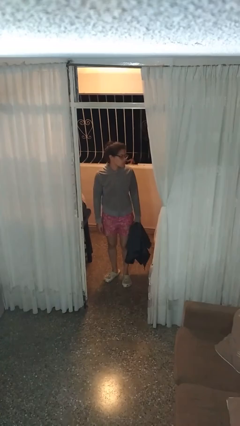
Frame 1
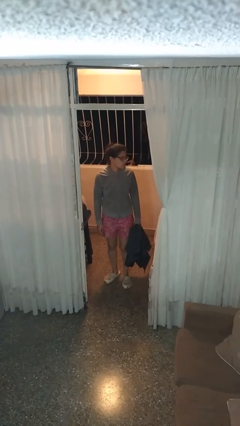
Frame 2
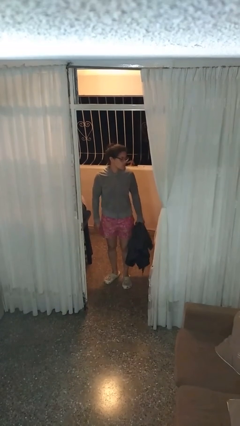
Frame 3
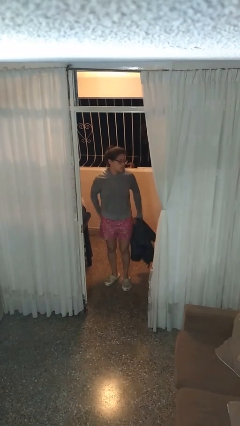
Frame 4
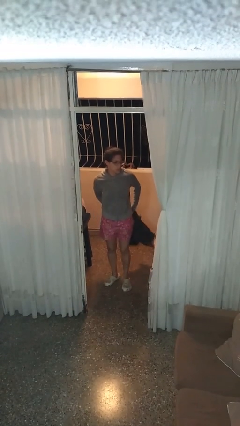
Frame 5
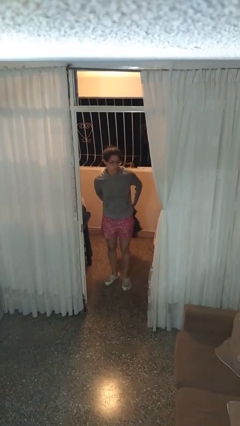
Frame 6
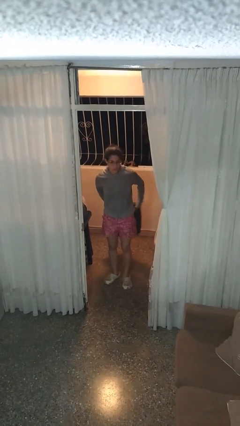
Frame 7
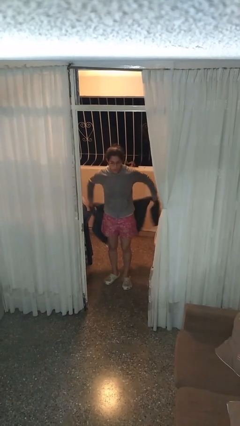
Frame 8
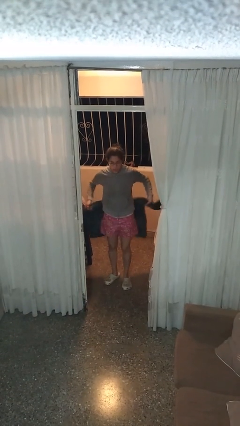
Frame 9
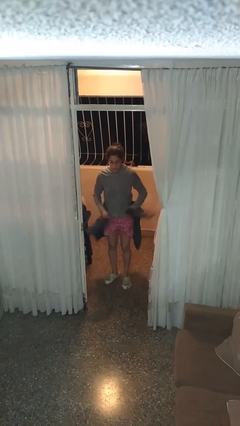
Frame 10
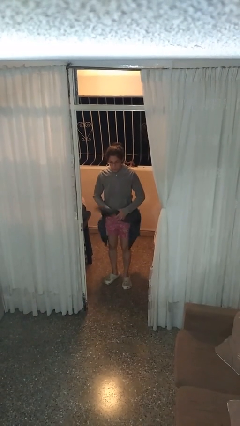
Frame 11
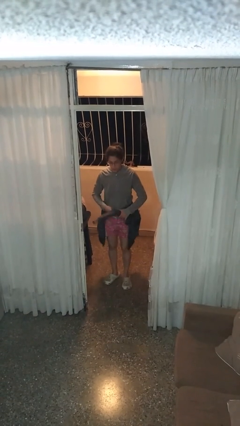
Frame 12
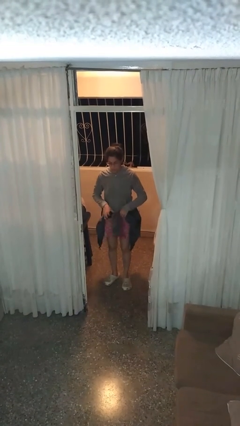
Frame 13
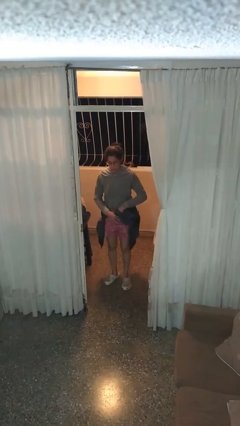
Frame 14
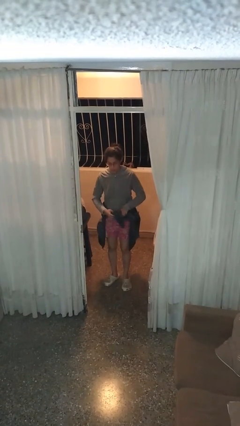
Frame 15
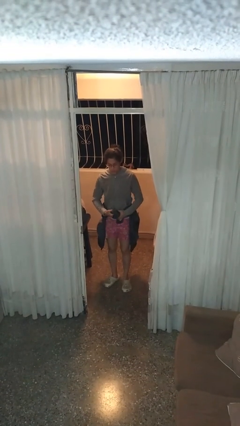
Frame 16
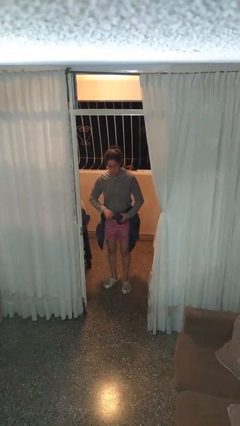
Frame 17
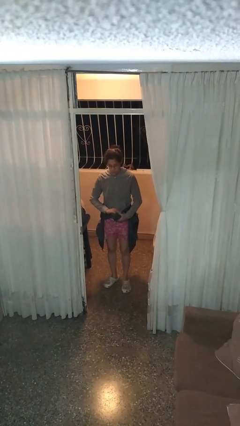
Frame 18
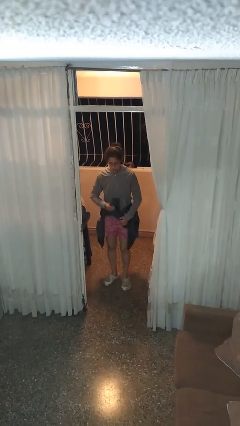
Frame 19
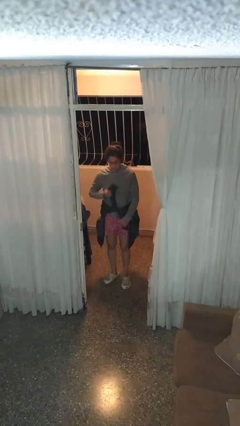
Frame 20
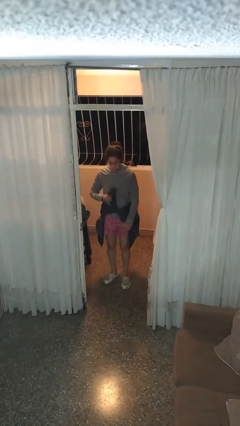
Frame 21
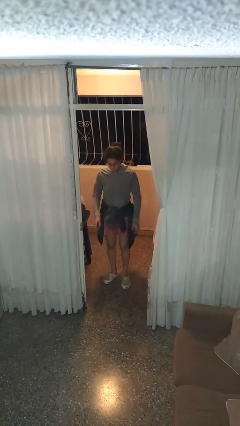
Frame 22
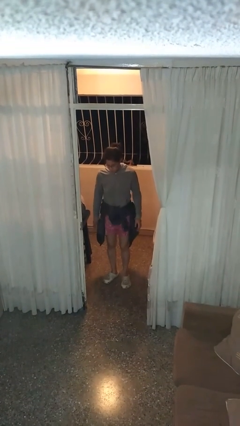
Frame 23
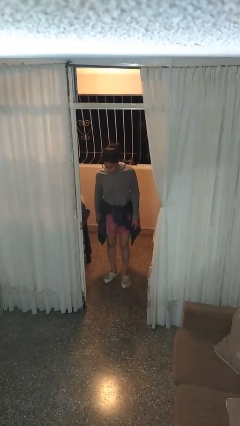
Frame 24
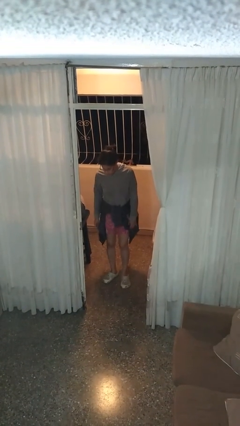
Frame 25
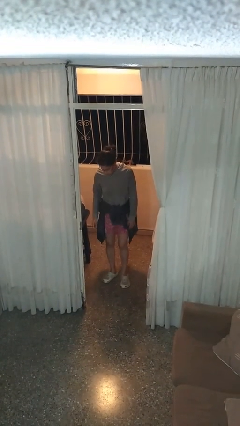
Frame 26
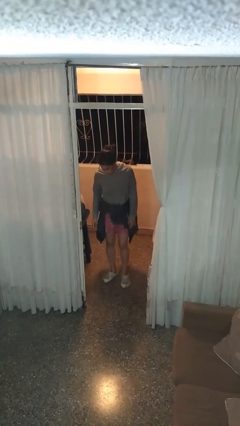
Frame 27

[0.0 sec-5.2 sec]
person ties jacket around waist

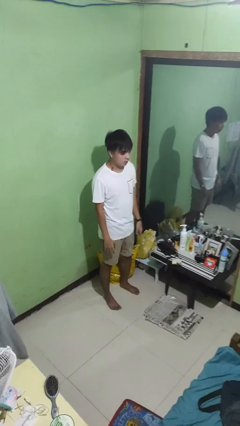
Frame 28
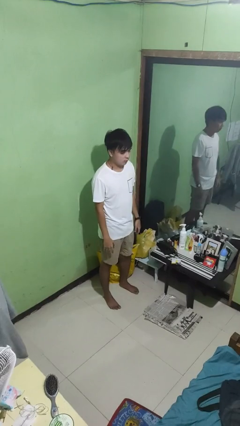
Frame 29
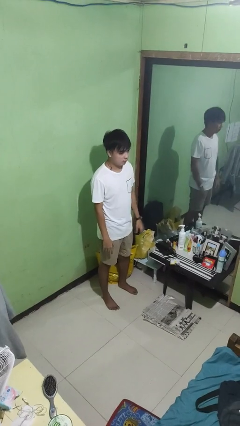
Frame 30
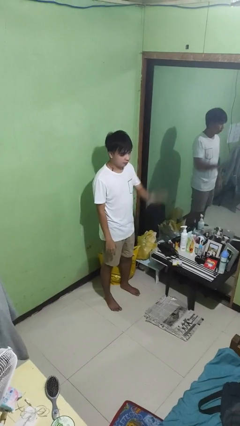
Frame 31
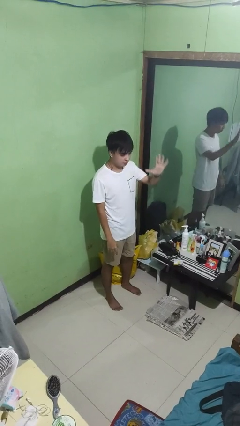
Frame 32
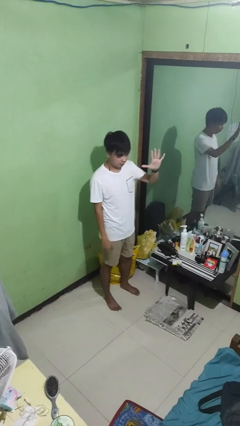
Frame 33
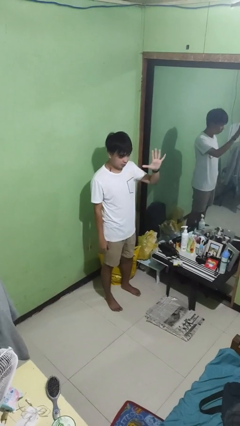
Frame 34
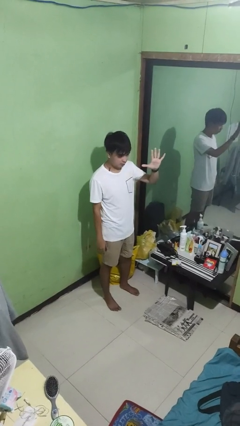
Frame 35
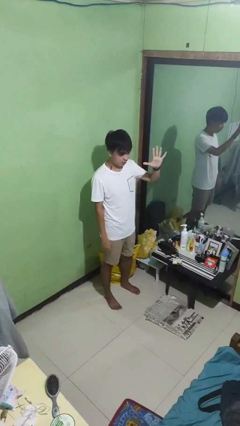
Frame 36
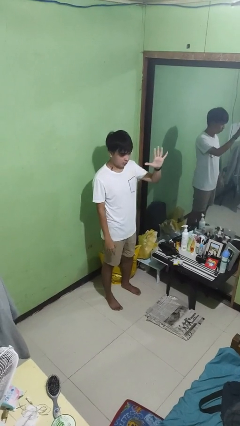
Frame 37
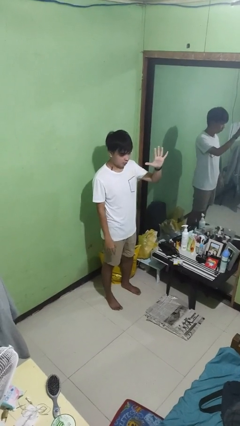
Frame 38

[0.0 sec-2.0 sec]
person gestures number five

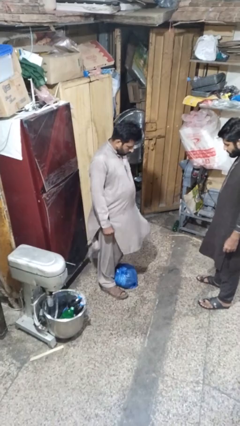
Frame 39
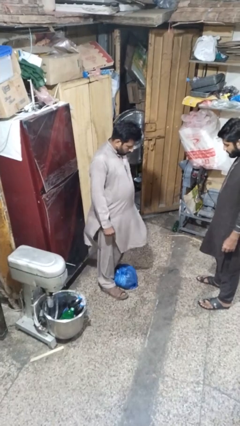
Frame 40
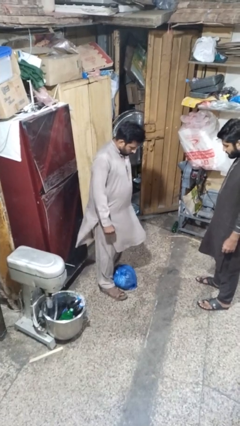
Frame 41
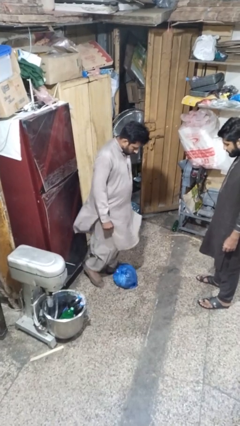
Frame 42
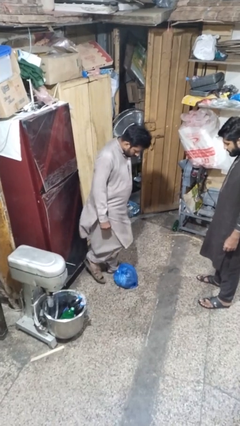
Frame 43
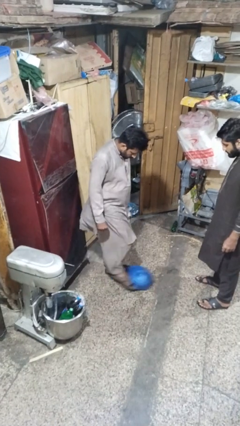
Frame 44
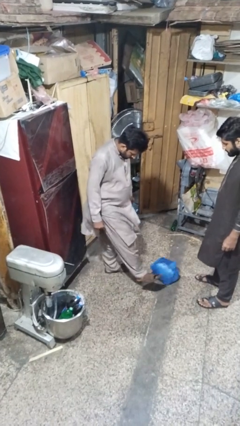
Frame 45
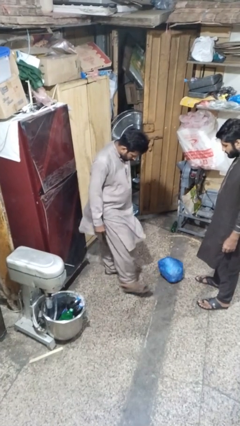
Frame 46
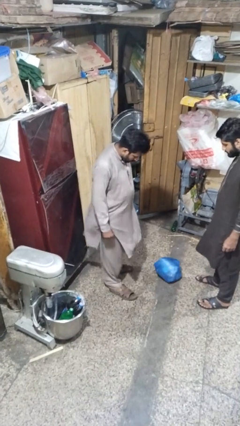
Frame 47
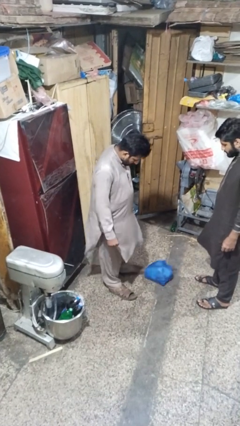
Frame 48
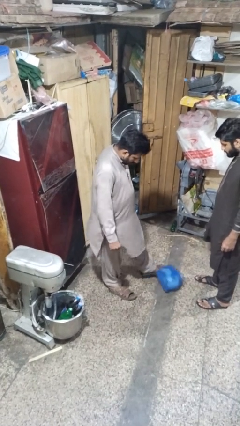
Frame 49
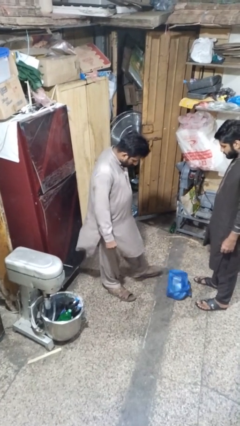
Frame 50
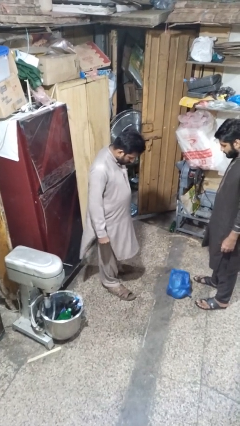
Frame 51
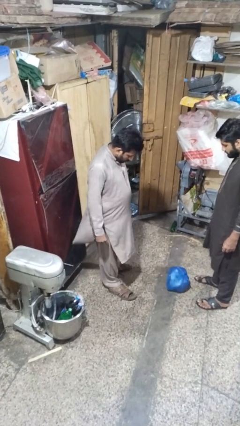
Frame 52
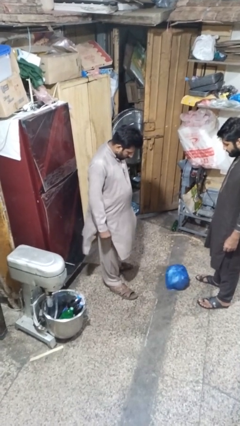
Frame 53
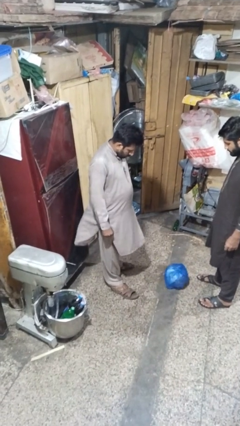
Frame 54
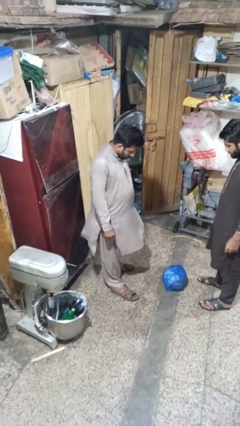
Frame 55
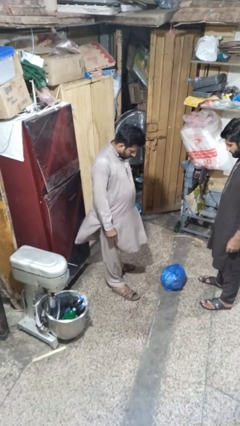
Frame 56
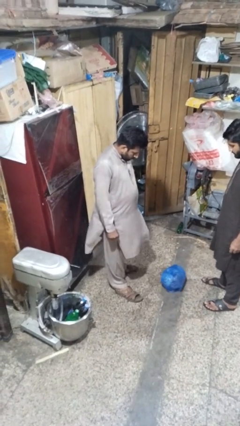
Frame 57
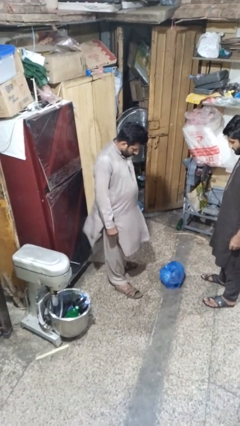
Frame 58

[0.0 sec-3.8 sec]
person kicks object to person

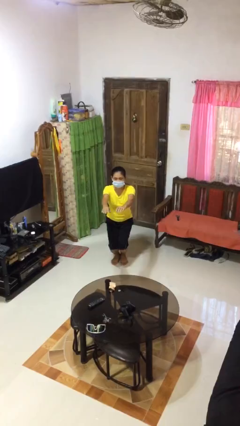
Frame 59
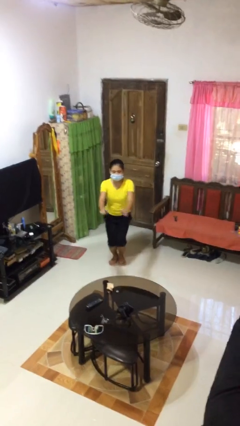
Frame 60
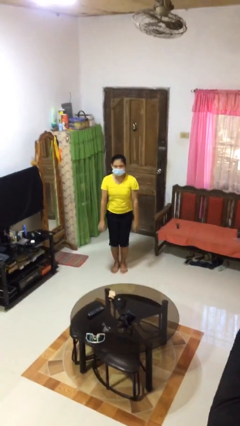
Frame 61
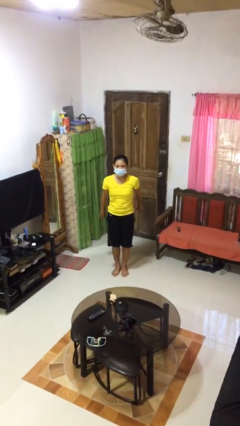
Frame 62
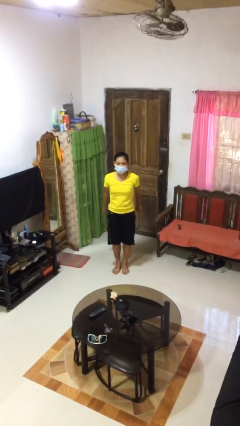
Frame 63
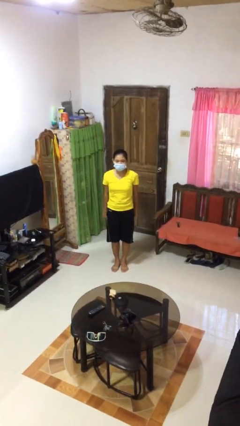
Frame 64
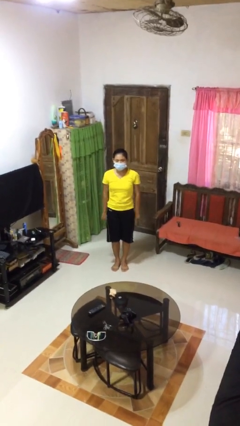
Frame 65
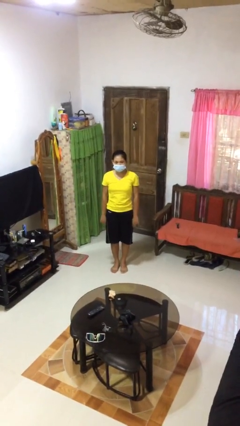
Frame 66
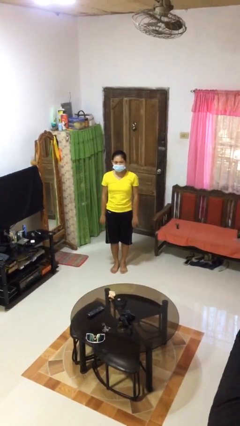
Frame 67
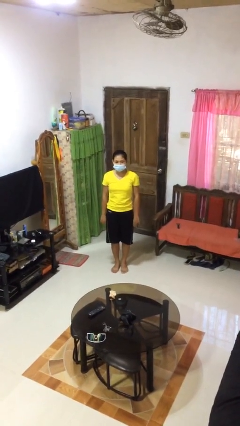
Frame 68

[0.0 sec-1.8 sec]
person stands up

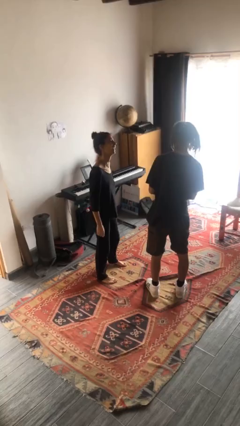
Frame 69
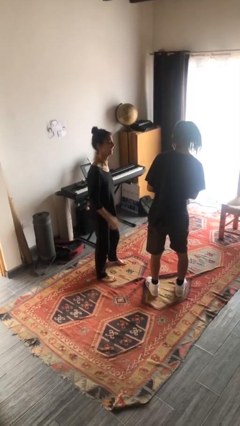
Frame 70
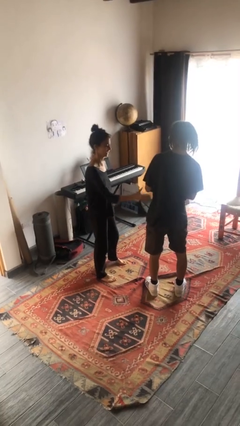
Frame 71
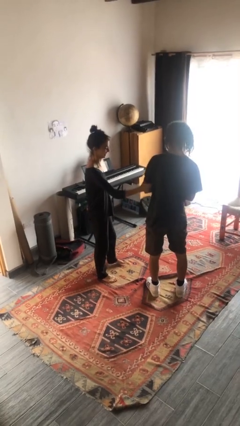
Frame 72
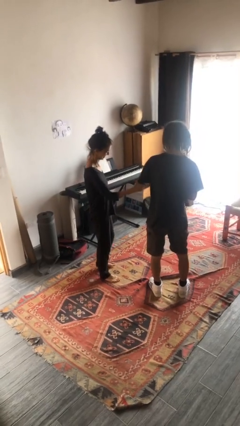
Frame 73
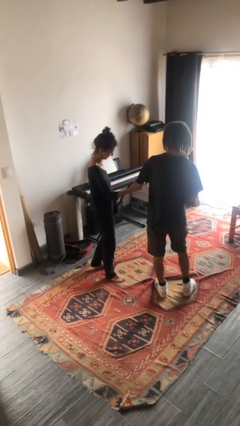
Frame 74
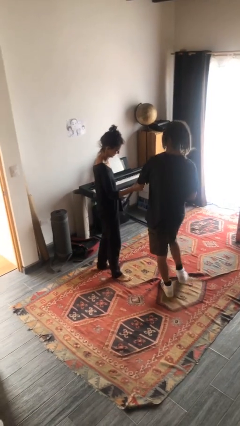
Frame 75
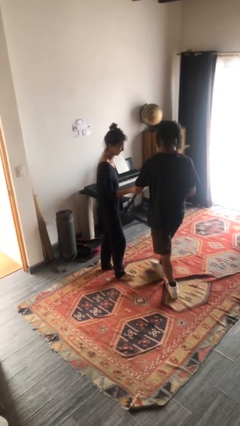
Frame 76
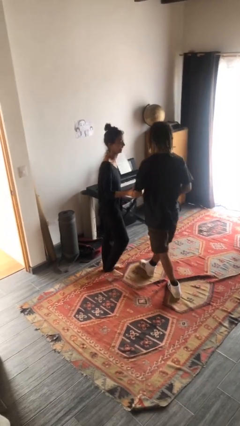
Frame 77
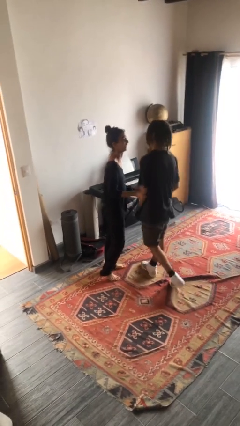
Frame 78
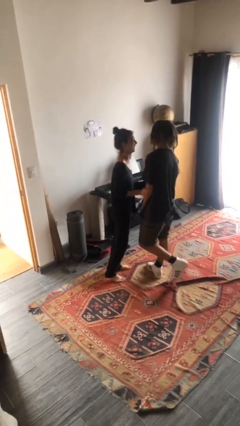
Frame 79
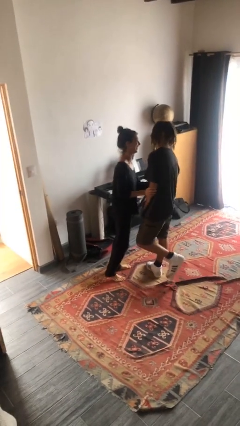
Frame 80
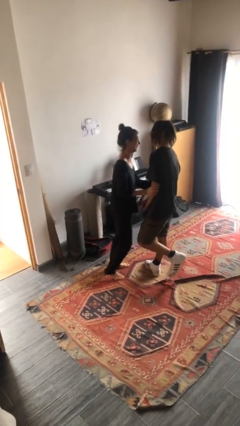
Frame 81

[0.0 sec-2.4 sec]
person grabs person by forearm

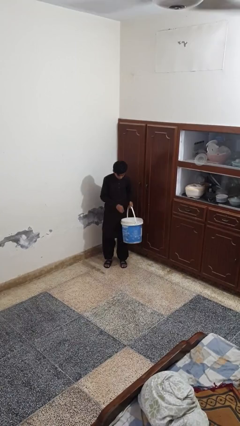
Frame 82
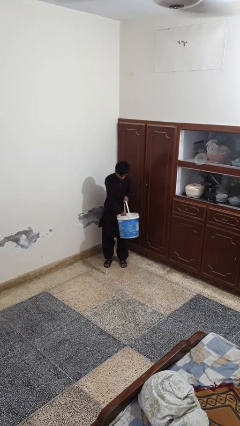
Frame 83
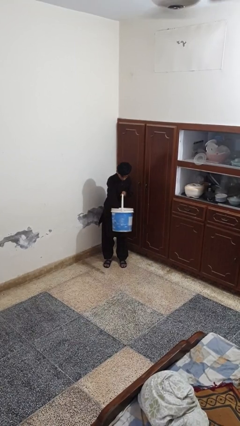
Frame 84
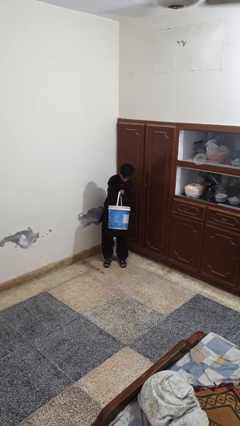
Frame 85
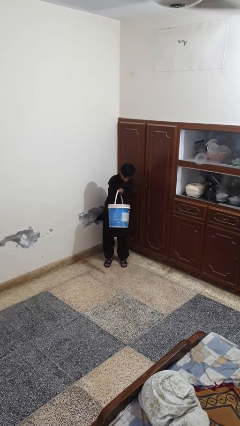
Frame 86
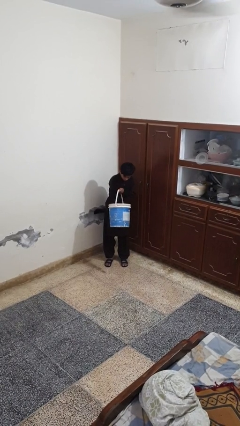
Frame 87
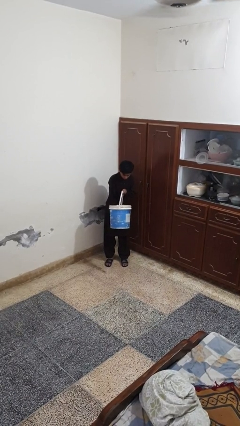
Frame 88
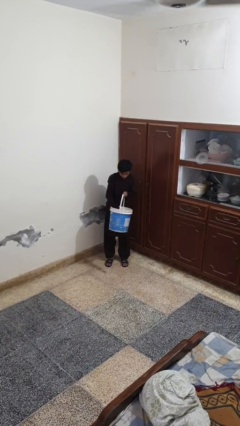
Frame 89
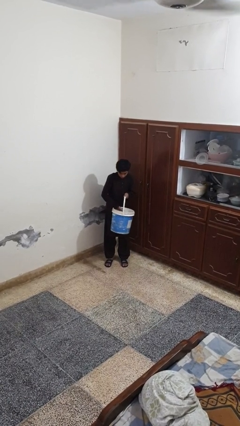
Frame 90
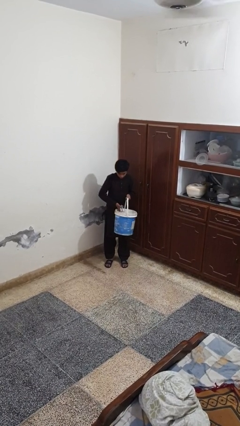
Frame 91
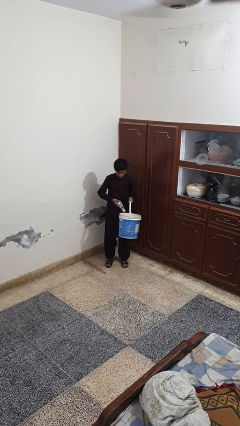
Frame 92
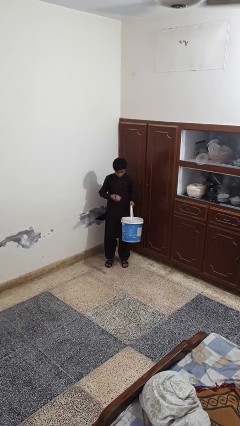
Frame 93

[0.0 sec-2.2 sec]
person takes object from basket
